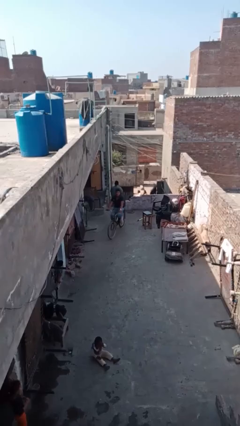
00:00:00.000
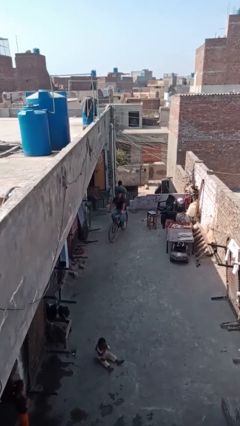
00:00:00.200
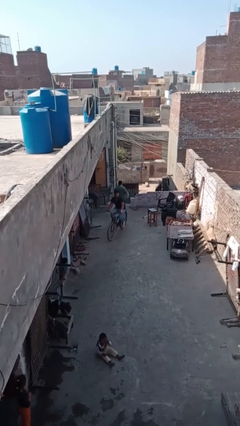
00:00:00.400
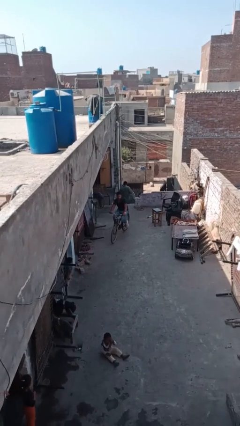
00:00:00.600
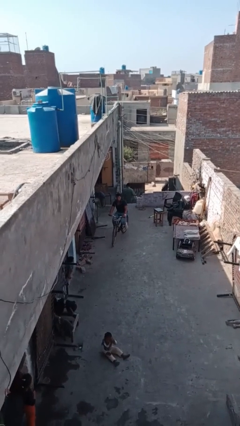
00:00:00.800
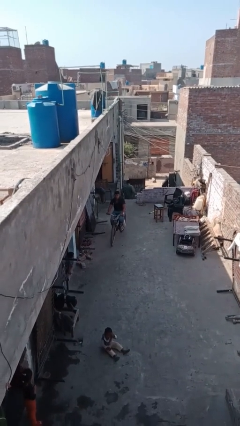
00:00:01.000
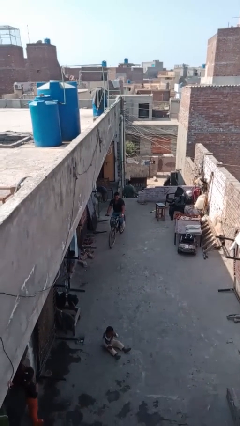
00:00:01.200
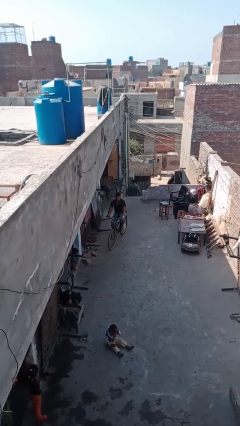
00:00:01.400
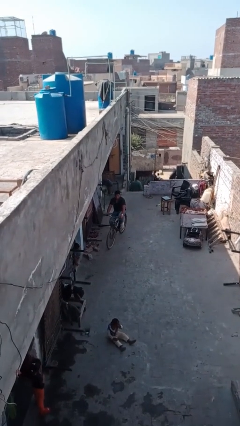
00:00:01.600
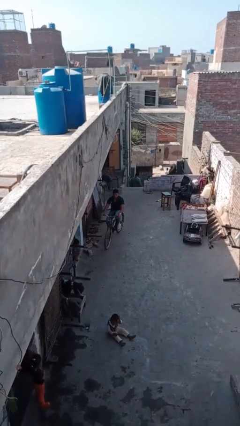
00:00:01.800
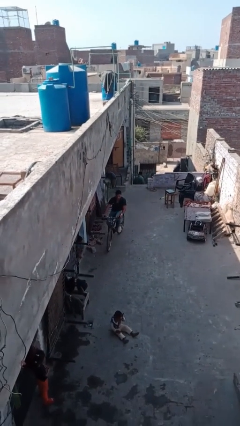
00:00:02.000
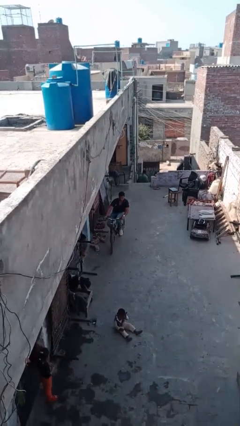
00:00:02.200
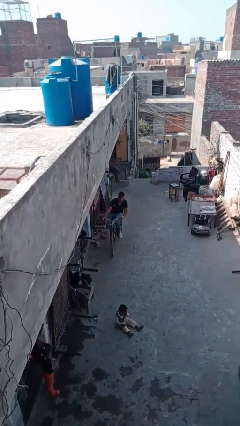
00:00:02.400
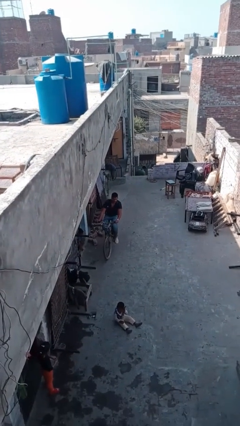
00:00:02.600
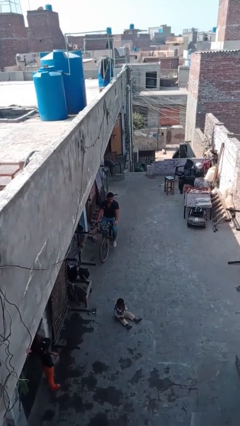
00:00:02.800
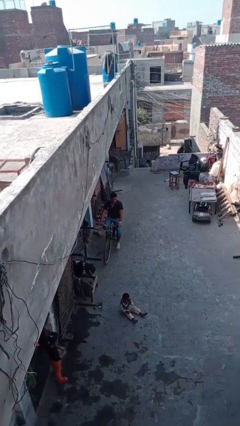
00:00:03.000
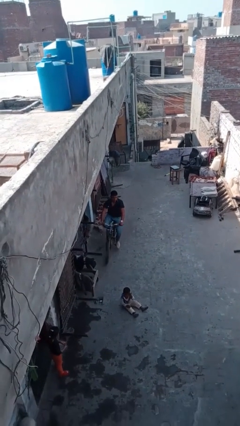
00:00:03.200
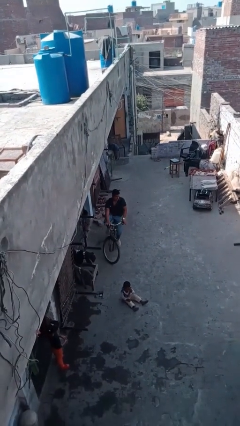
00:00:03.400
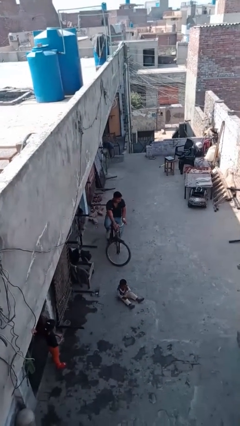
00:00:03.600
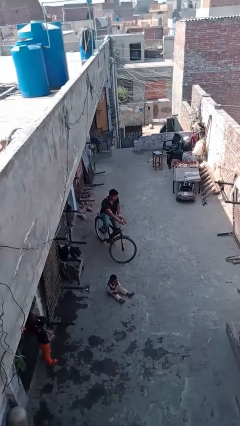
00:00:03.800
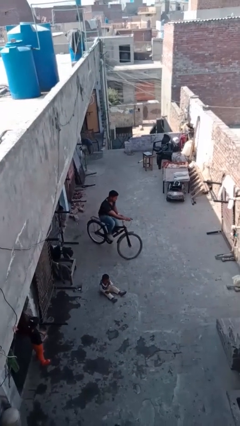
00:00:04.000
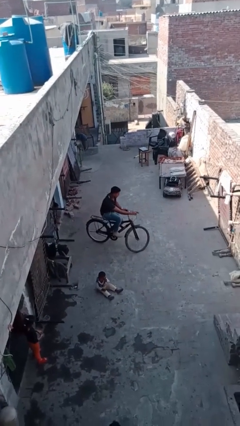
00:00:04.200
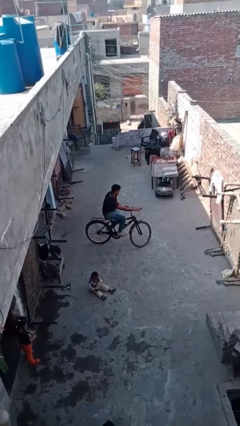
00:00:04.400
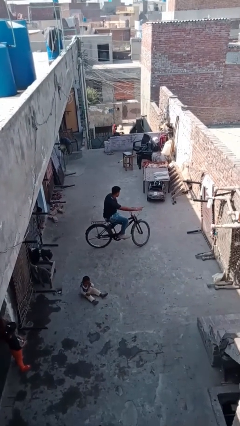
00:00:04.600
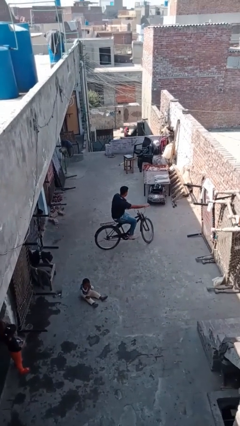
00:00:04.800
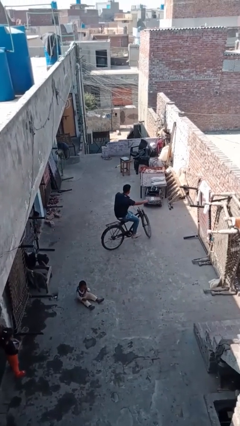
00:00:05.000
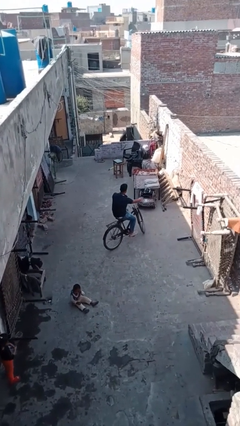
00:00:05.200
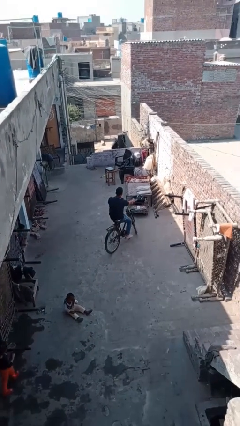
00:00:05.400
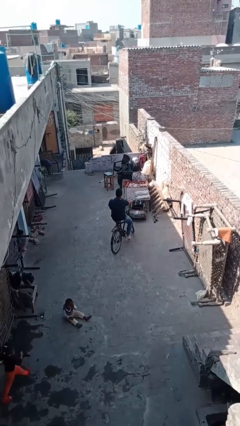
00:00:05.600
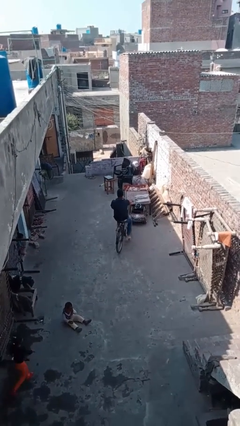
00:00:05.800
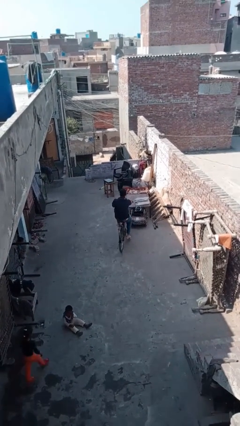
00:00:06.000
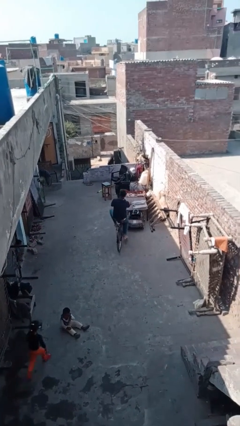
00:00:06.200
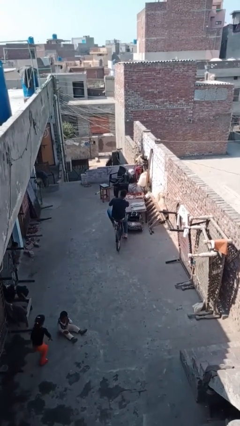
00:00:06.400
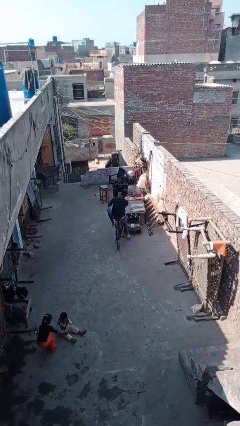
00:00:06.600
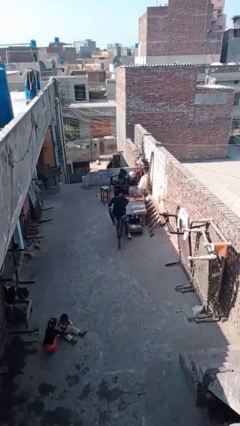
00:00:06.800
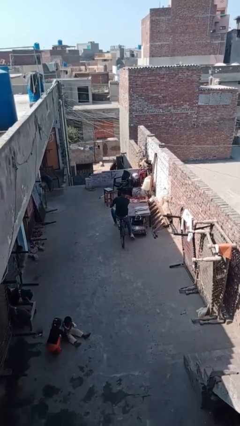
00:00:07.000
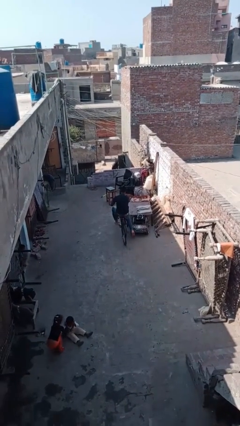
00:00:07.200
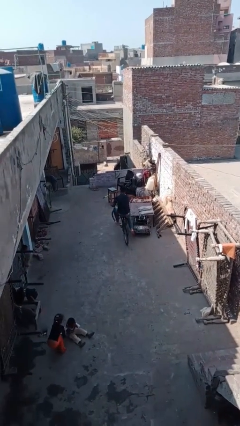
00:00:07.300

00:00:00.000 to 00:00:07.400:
person rides bicycle

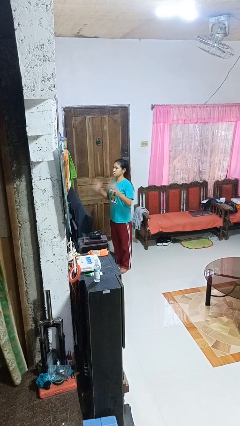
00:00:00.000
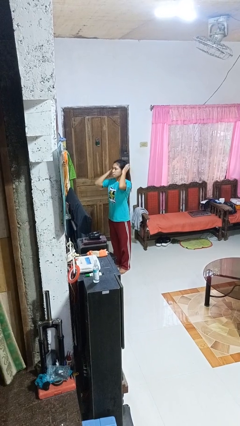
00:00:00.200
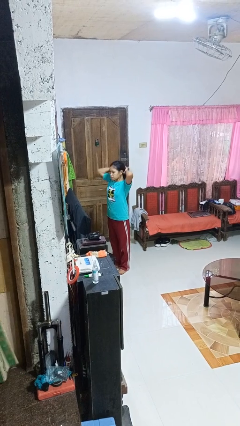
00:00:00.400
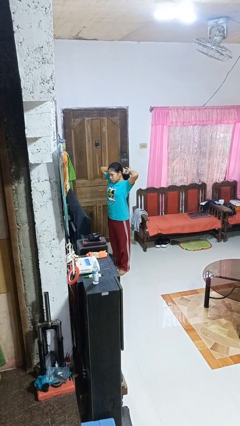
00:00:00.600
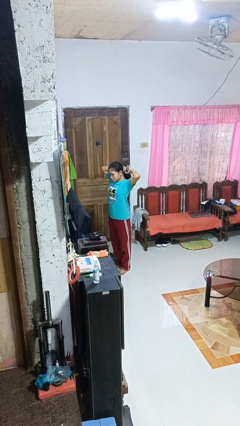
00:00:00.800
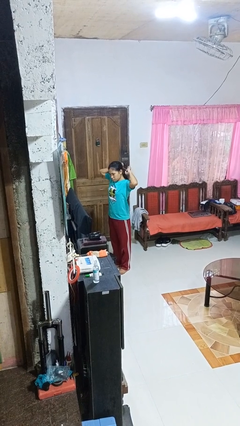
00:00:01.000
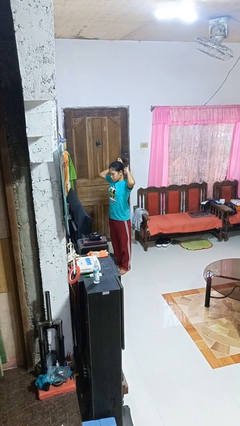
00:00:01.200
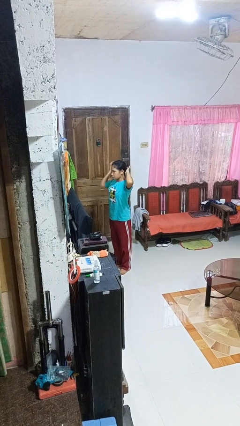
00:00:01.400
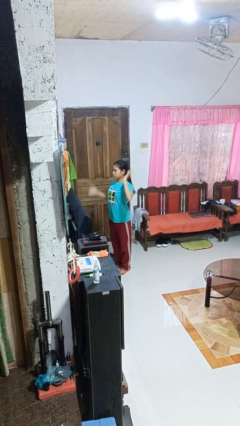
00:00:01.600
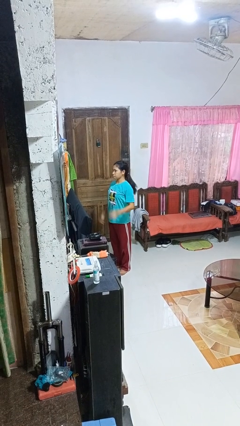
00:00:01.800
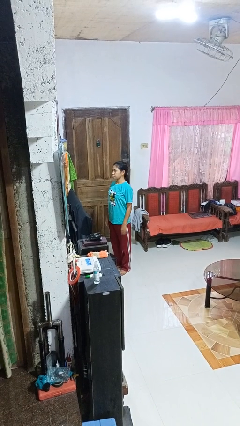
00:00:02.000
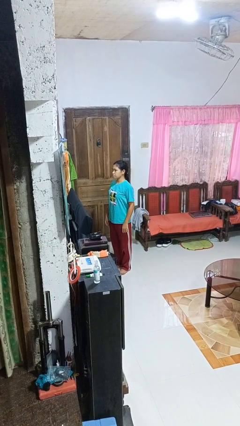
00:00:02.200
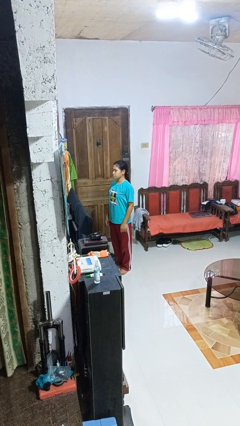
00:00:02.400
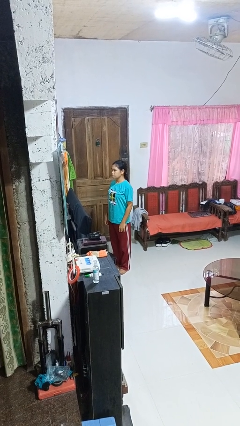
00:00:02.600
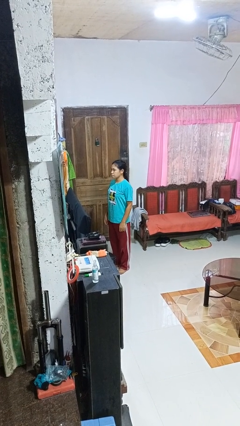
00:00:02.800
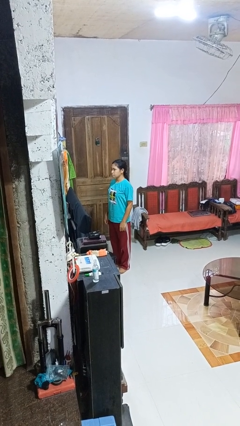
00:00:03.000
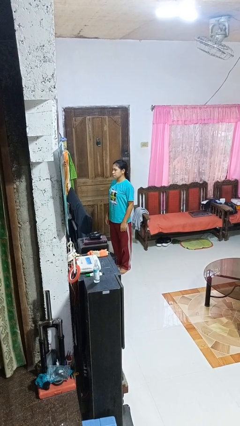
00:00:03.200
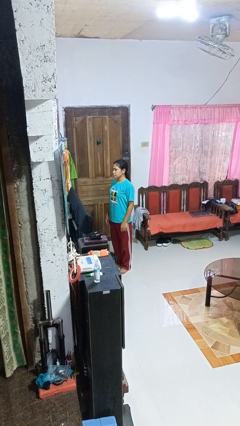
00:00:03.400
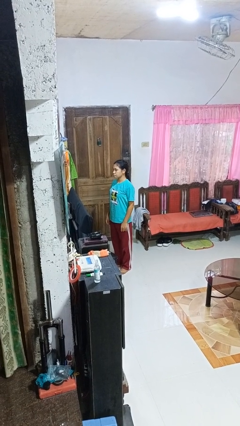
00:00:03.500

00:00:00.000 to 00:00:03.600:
person puts hair in ponytail

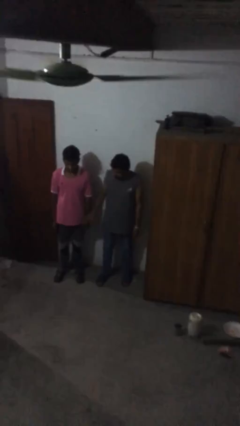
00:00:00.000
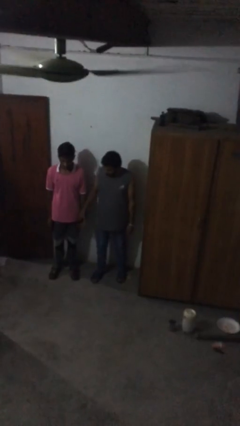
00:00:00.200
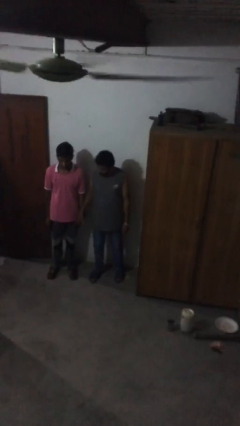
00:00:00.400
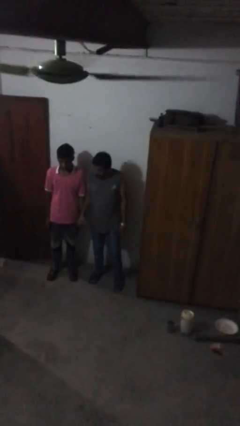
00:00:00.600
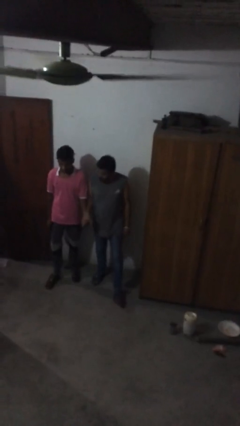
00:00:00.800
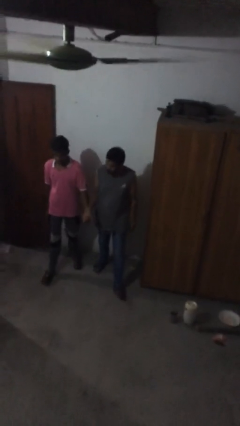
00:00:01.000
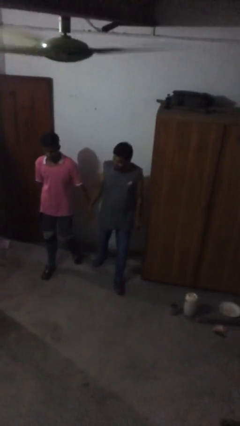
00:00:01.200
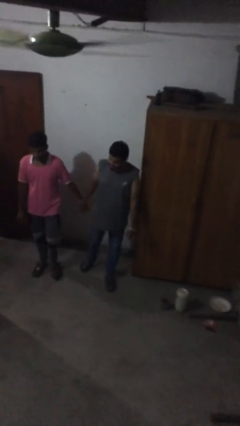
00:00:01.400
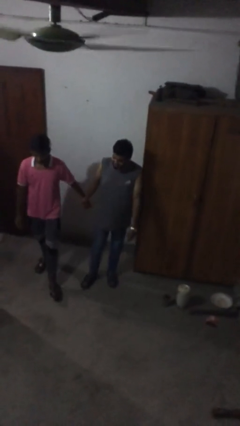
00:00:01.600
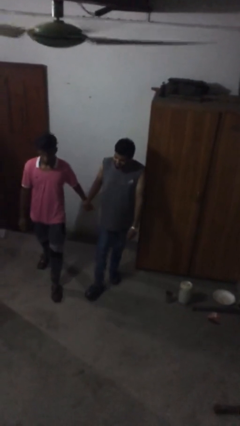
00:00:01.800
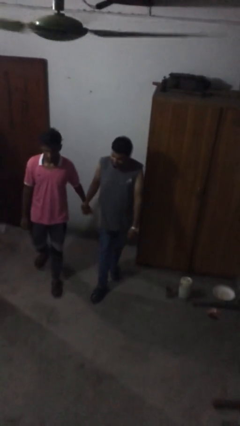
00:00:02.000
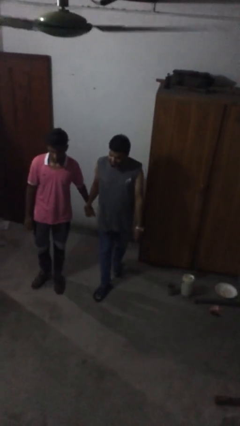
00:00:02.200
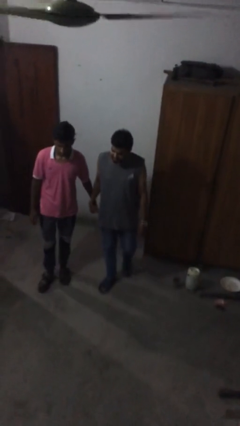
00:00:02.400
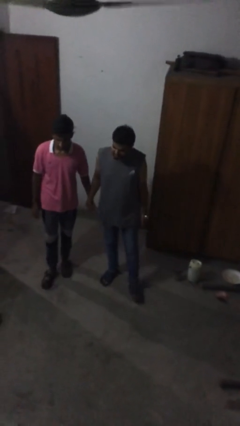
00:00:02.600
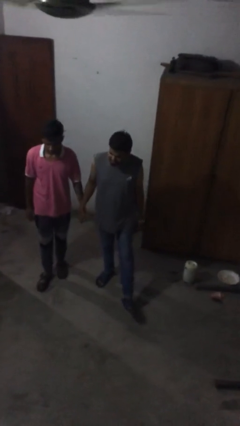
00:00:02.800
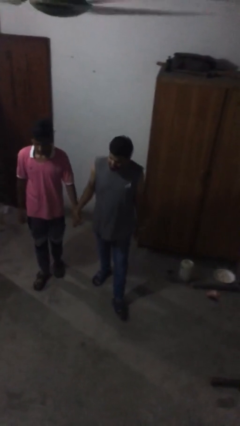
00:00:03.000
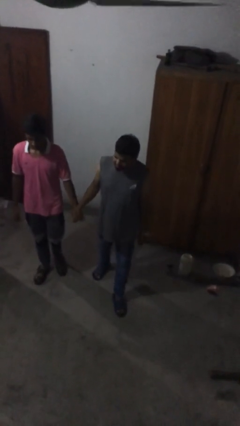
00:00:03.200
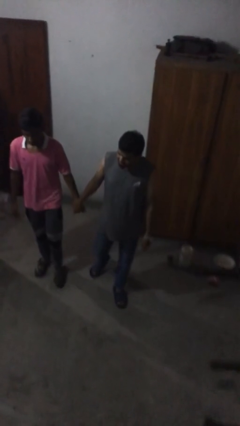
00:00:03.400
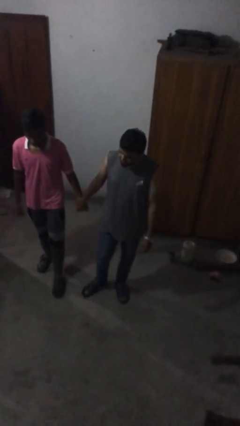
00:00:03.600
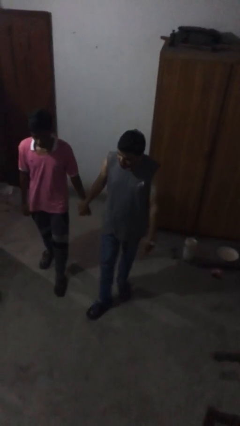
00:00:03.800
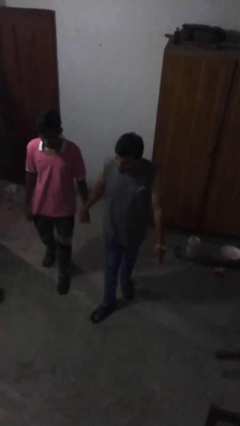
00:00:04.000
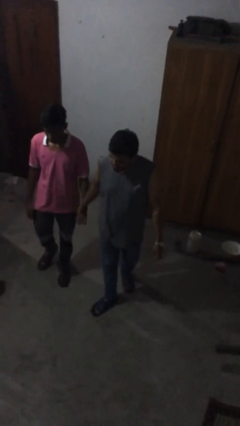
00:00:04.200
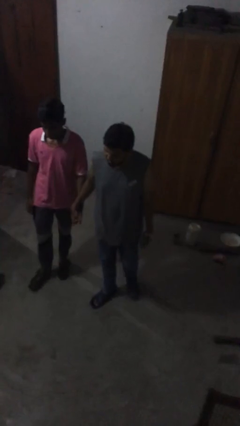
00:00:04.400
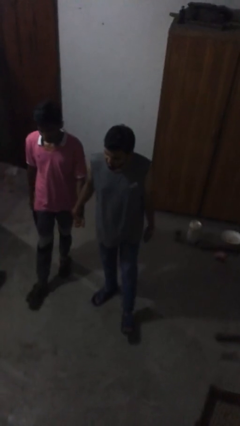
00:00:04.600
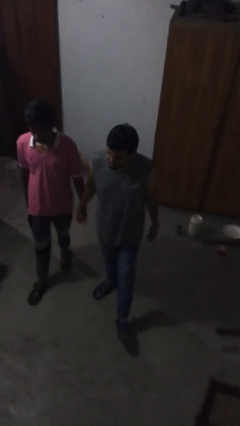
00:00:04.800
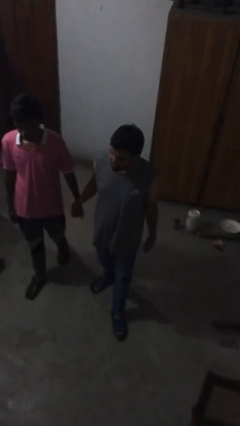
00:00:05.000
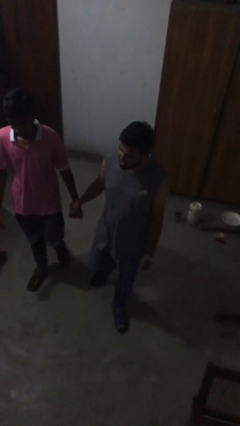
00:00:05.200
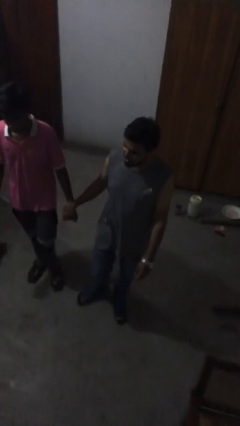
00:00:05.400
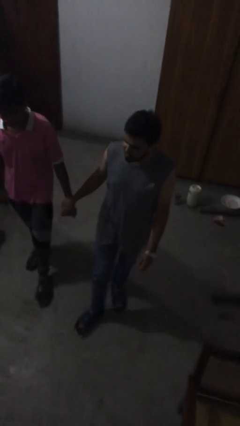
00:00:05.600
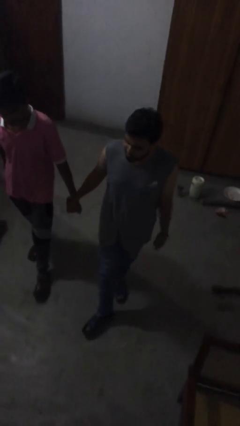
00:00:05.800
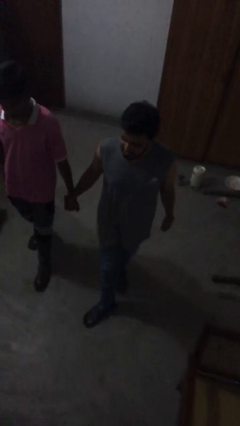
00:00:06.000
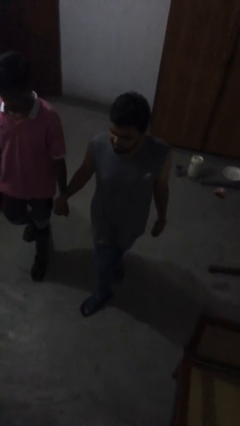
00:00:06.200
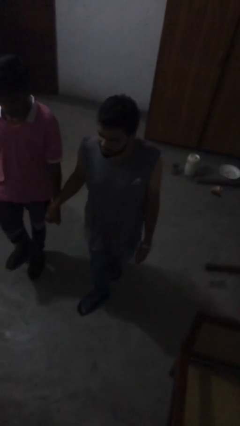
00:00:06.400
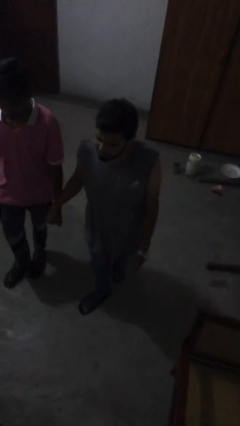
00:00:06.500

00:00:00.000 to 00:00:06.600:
person holds hand
